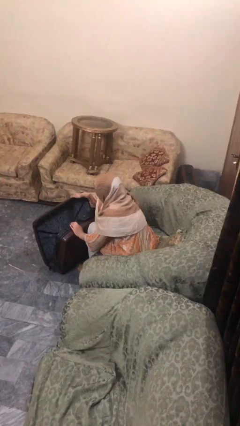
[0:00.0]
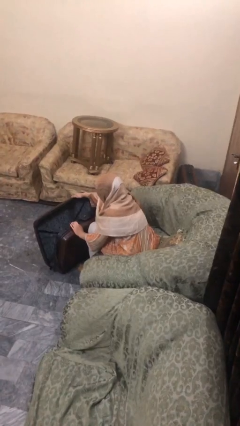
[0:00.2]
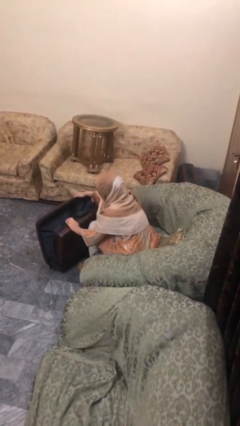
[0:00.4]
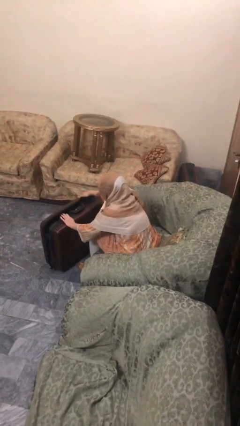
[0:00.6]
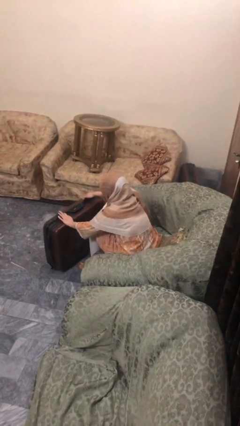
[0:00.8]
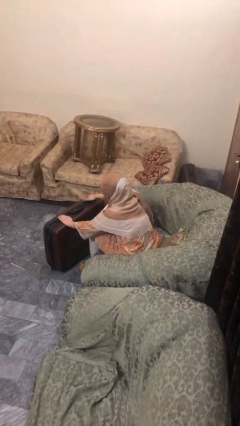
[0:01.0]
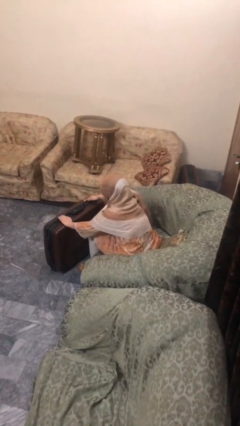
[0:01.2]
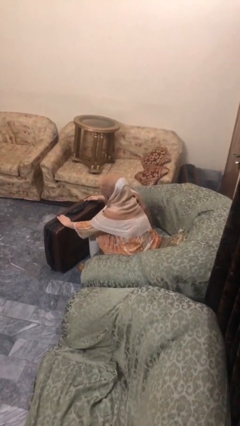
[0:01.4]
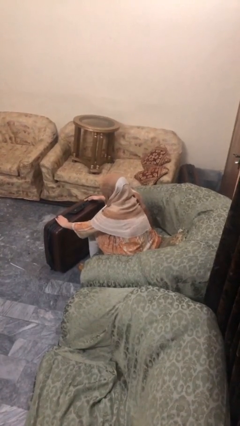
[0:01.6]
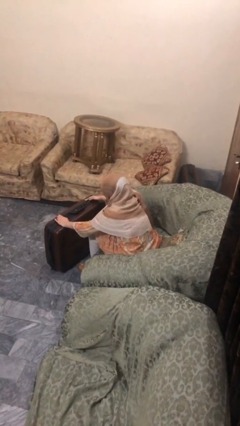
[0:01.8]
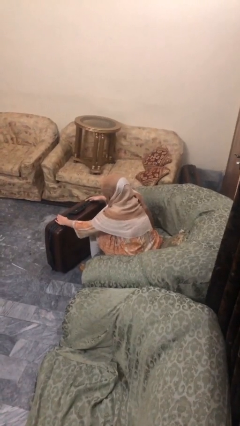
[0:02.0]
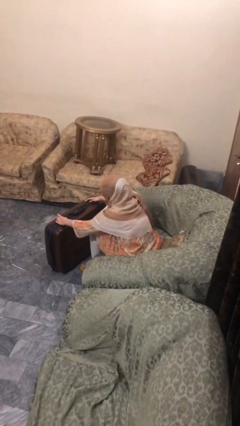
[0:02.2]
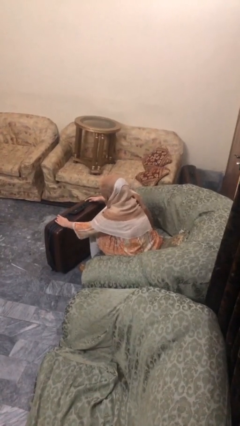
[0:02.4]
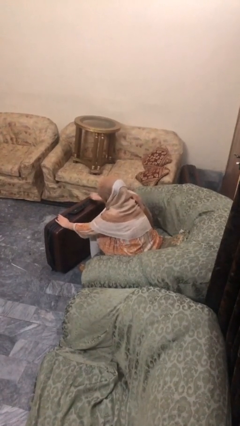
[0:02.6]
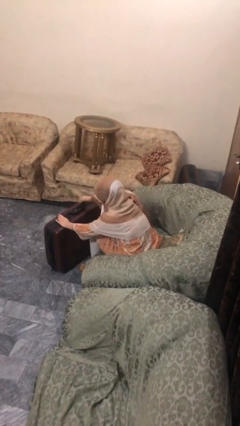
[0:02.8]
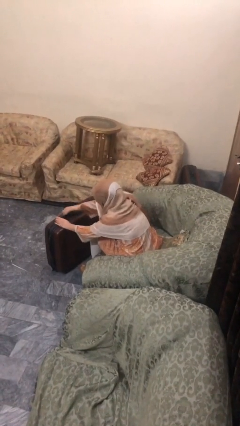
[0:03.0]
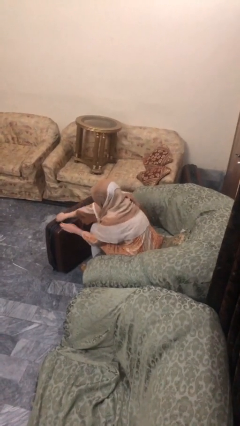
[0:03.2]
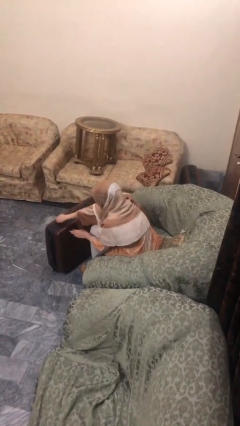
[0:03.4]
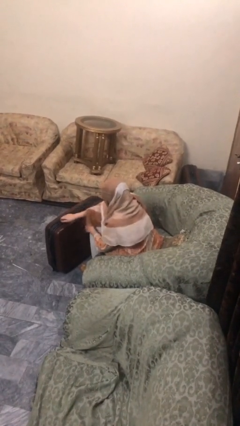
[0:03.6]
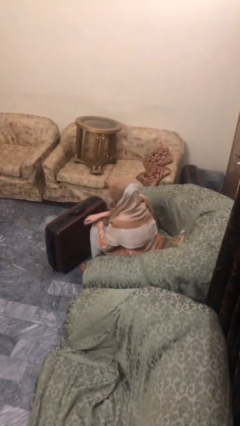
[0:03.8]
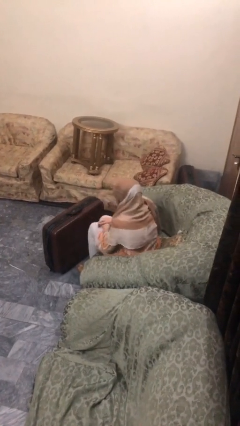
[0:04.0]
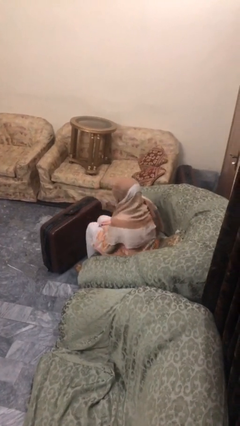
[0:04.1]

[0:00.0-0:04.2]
person closes suitcase

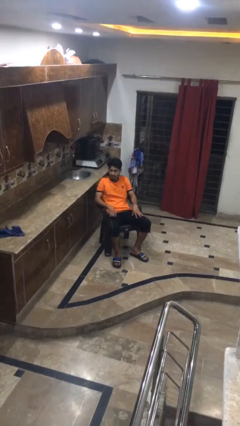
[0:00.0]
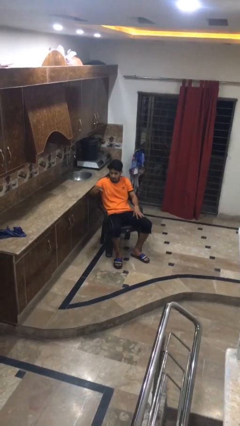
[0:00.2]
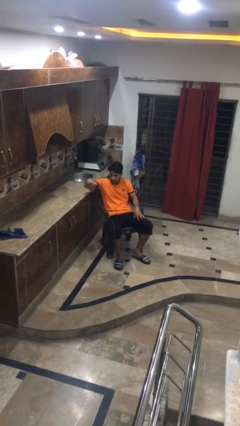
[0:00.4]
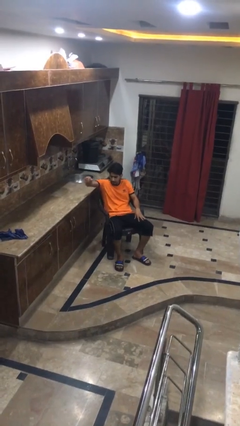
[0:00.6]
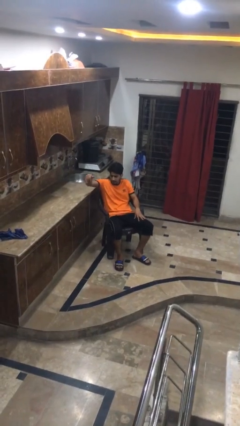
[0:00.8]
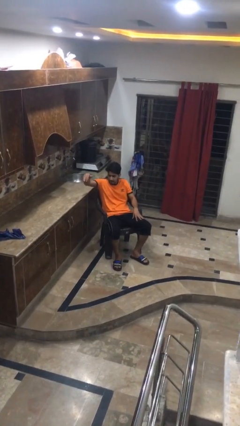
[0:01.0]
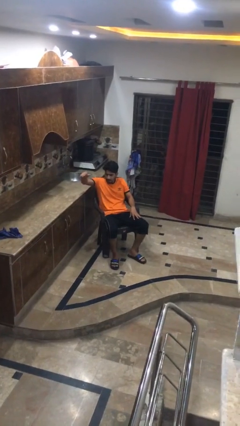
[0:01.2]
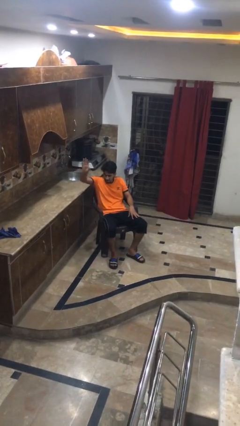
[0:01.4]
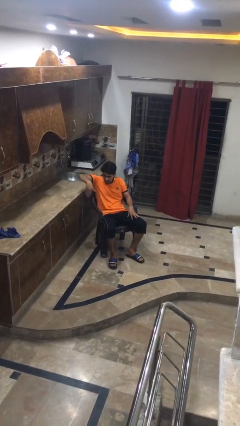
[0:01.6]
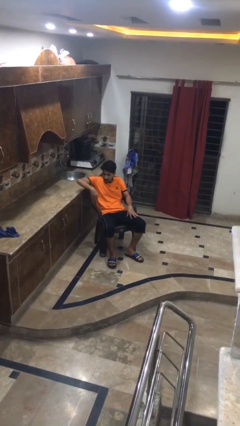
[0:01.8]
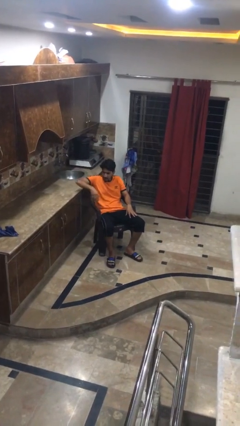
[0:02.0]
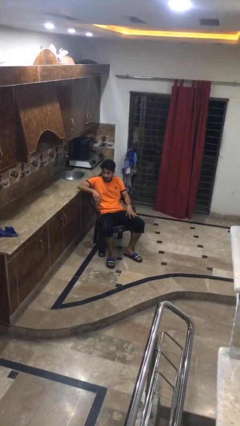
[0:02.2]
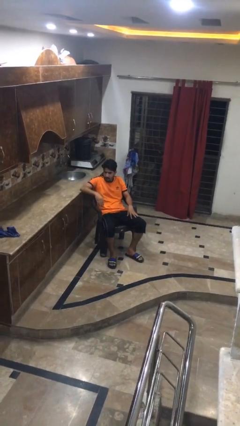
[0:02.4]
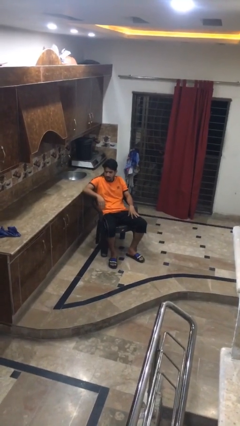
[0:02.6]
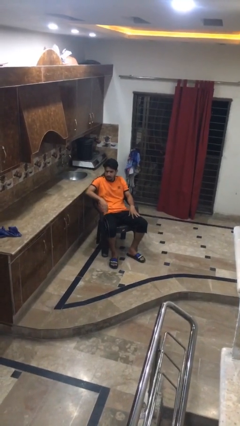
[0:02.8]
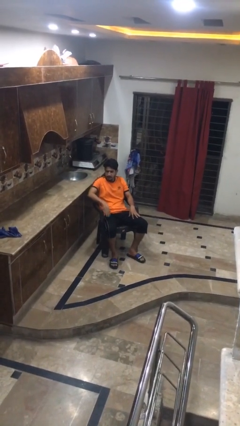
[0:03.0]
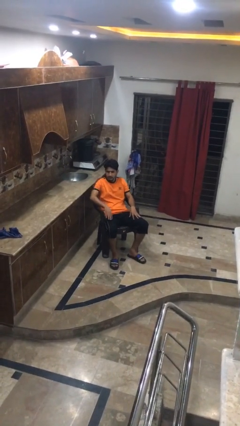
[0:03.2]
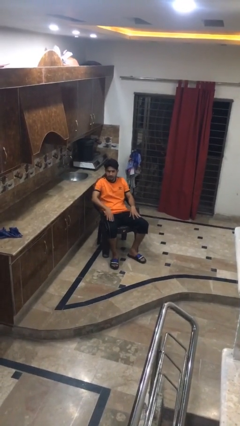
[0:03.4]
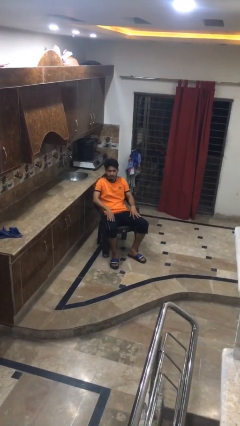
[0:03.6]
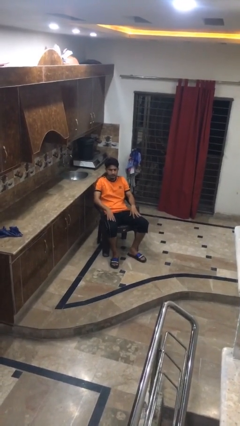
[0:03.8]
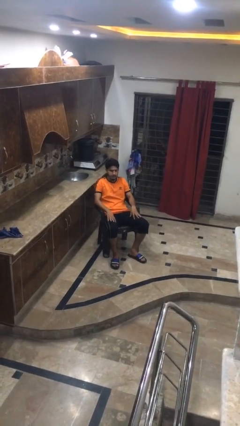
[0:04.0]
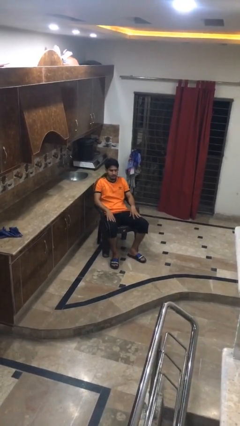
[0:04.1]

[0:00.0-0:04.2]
person gestures come here

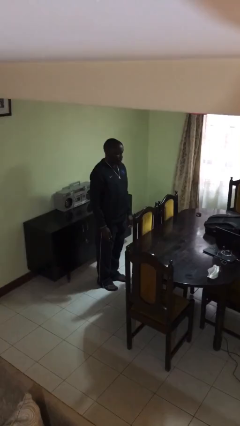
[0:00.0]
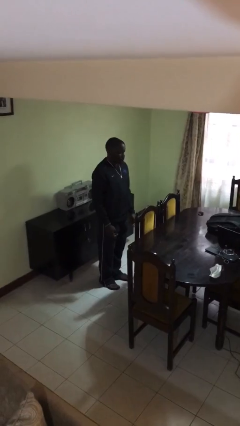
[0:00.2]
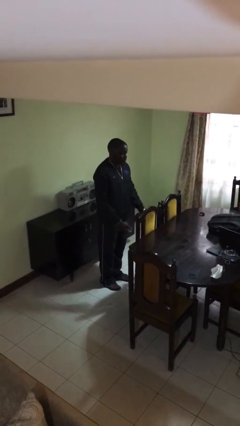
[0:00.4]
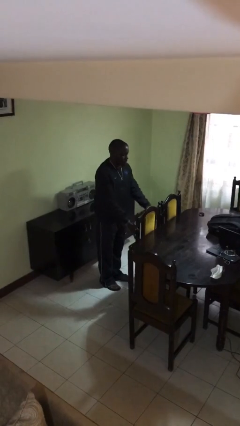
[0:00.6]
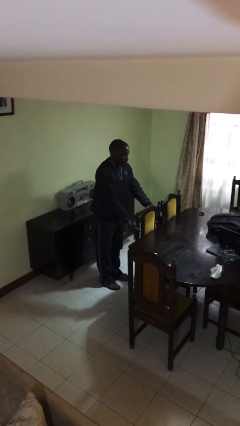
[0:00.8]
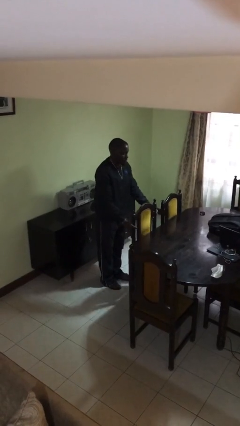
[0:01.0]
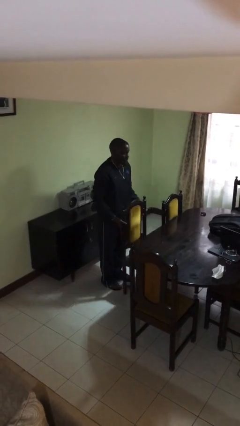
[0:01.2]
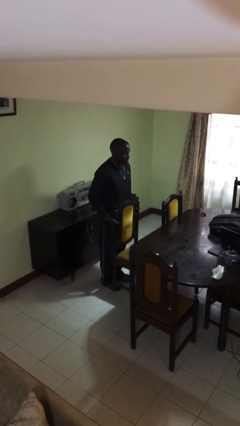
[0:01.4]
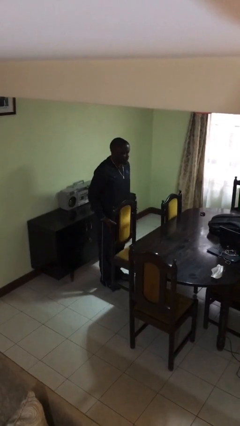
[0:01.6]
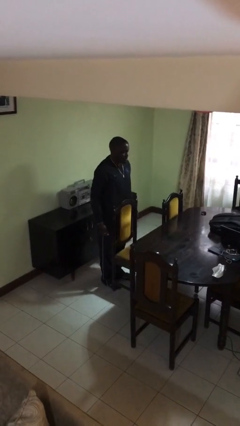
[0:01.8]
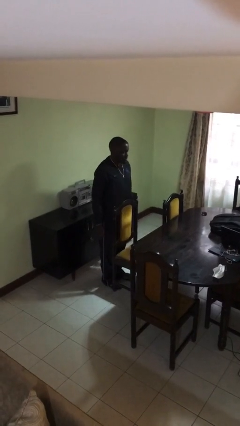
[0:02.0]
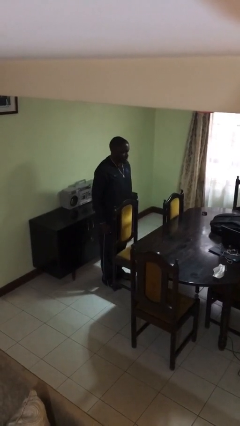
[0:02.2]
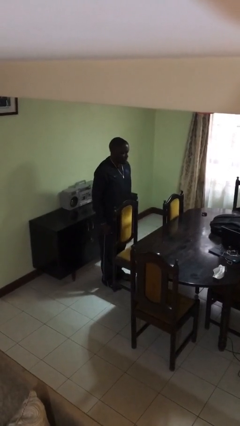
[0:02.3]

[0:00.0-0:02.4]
person pulls out chair

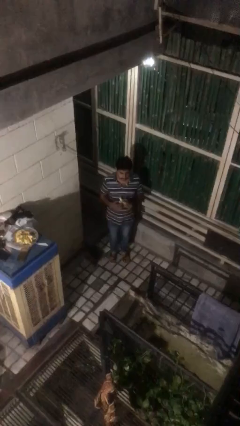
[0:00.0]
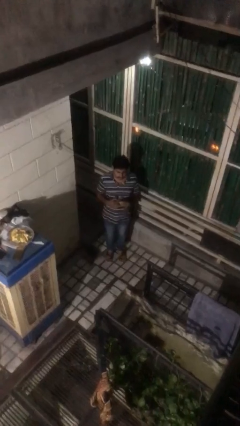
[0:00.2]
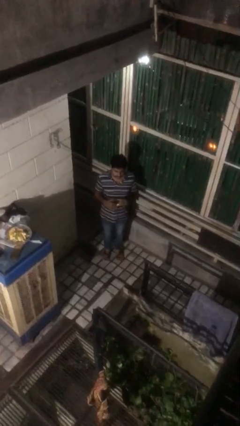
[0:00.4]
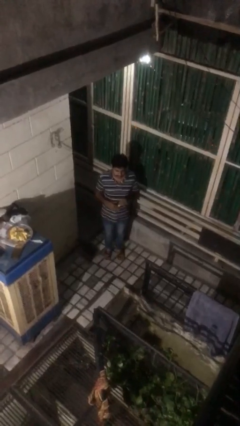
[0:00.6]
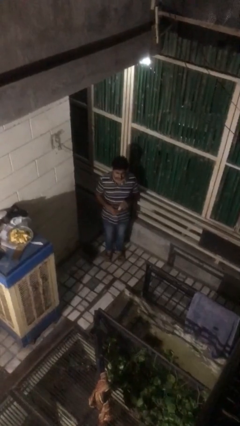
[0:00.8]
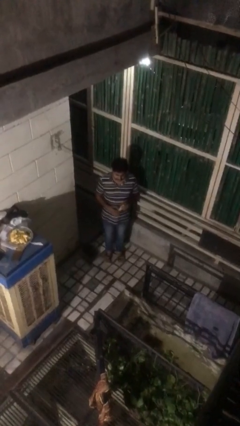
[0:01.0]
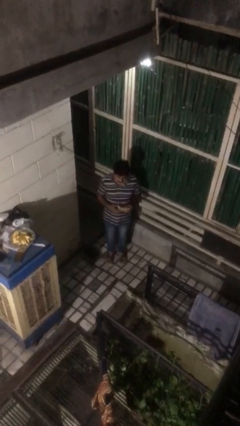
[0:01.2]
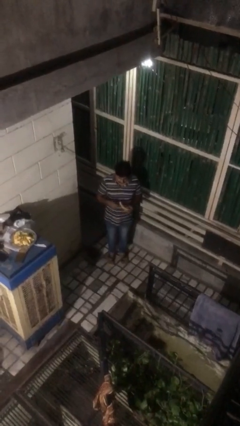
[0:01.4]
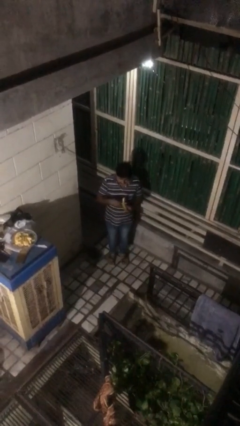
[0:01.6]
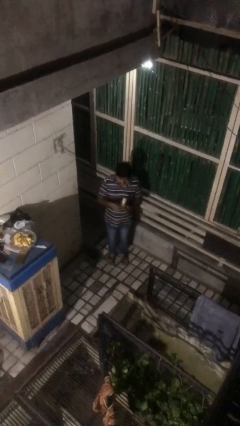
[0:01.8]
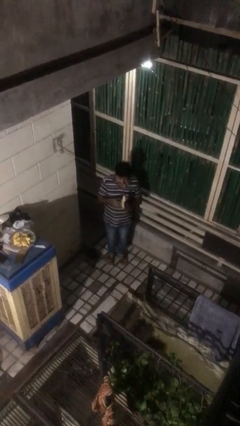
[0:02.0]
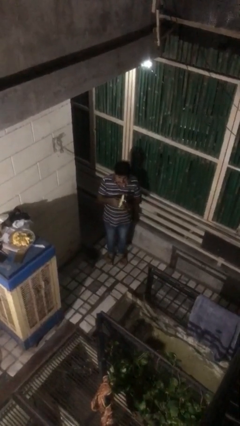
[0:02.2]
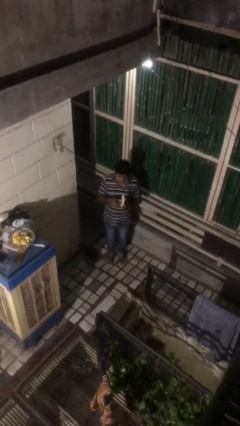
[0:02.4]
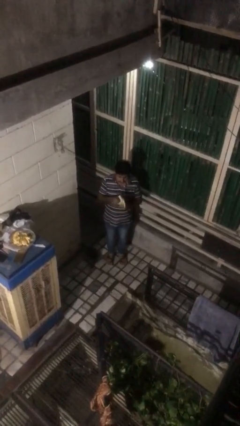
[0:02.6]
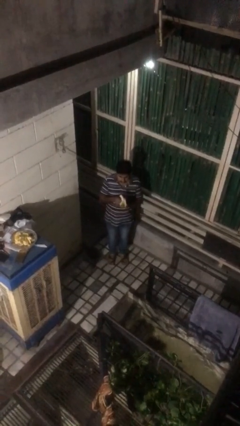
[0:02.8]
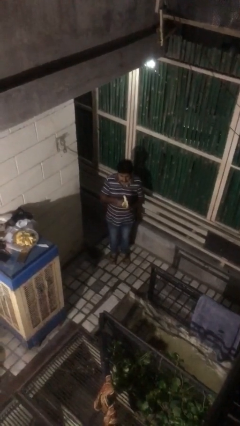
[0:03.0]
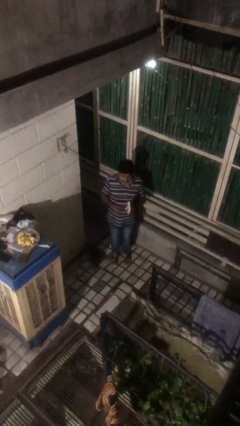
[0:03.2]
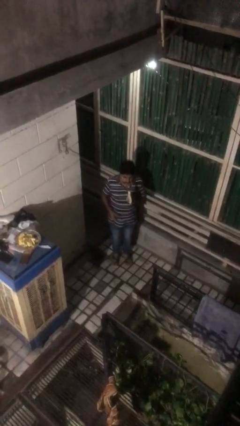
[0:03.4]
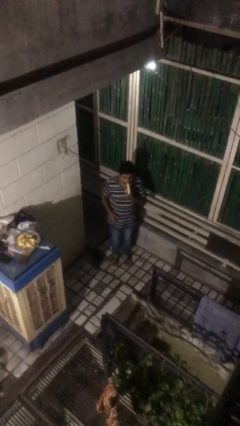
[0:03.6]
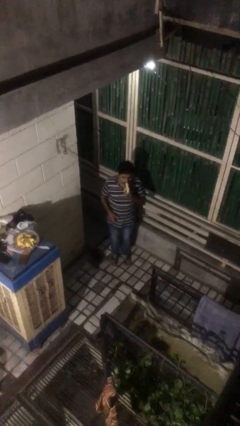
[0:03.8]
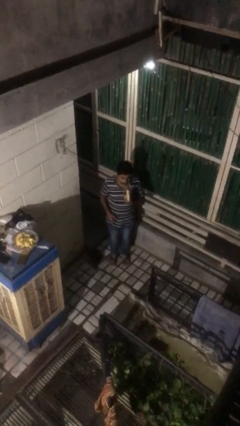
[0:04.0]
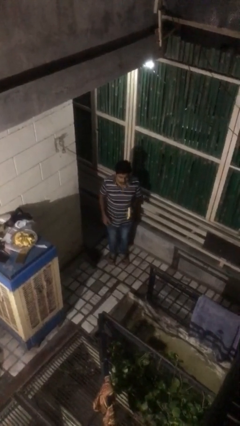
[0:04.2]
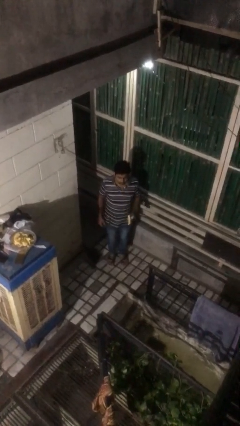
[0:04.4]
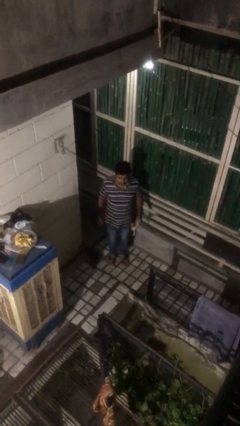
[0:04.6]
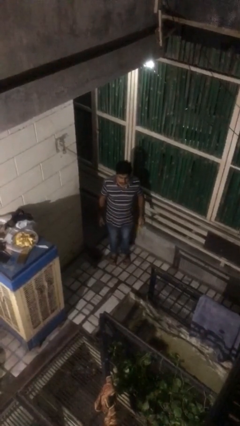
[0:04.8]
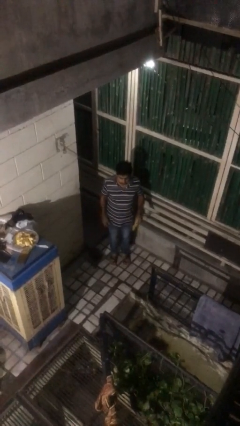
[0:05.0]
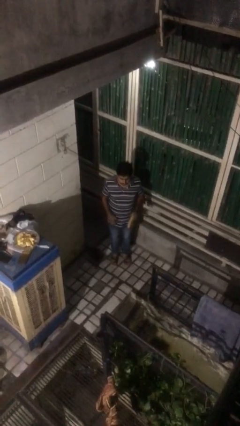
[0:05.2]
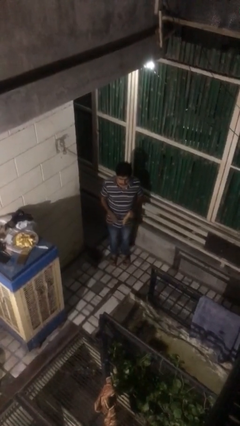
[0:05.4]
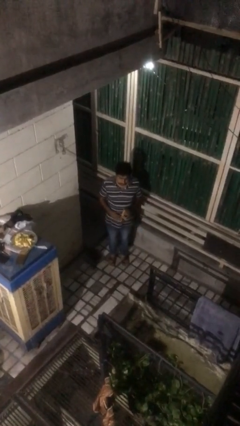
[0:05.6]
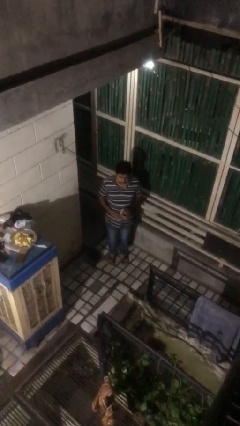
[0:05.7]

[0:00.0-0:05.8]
person eats banana

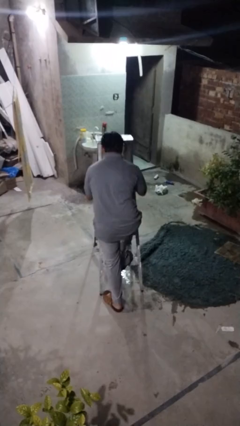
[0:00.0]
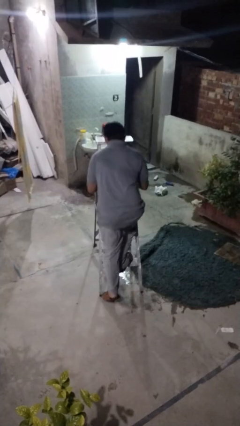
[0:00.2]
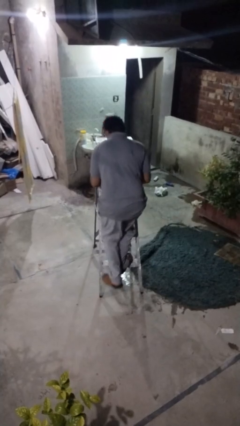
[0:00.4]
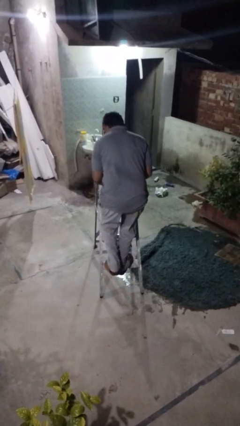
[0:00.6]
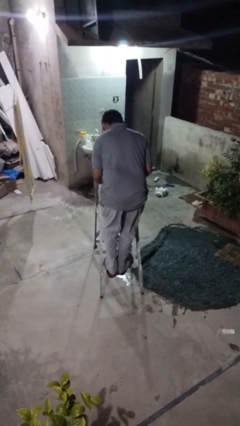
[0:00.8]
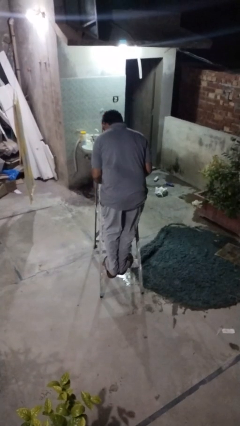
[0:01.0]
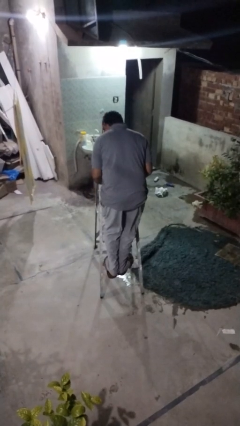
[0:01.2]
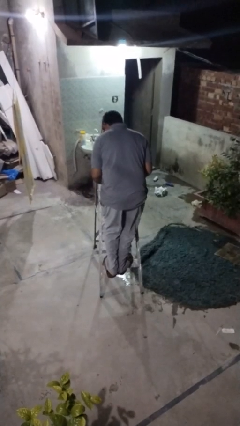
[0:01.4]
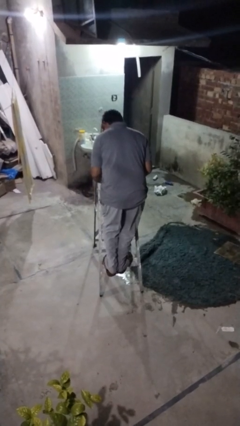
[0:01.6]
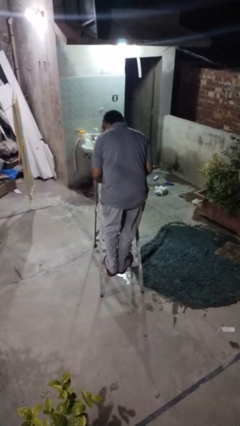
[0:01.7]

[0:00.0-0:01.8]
person climbs up ladder
